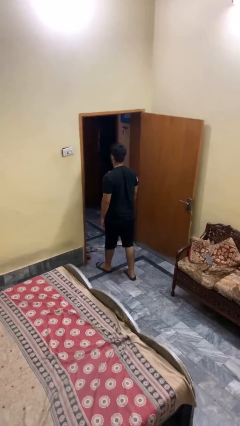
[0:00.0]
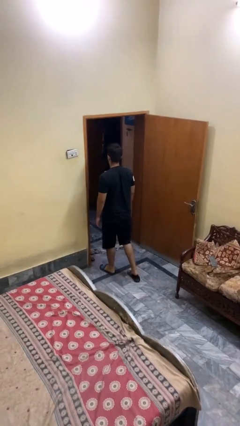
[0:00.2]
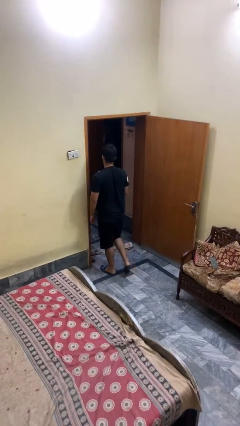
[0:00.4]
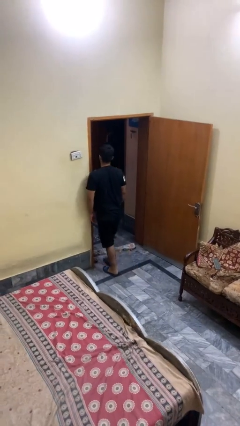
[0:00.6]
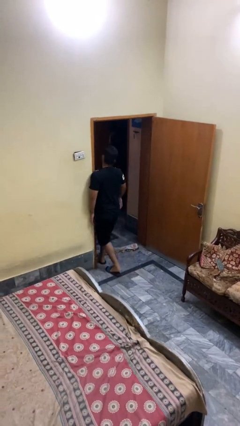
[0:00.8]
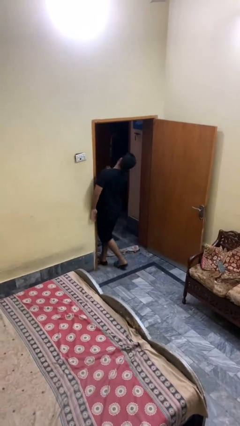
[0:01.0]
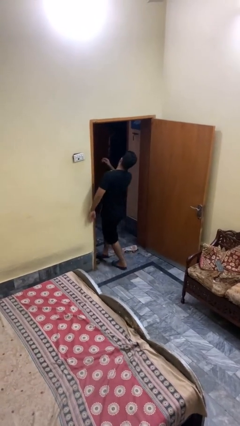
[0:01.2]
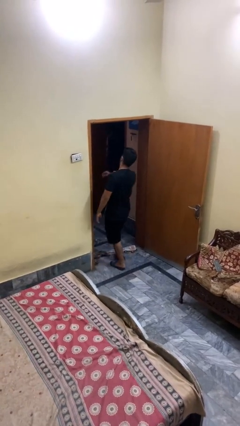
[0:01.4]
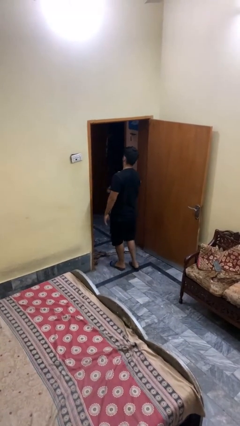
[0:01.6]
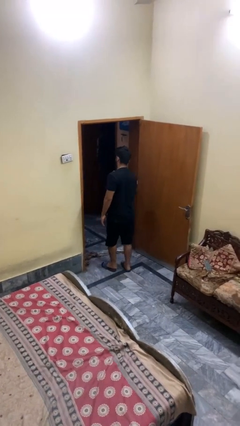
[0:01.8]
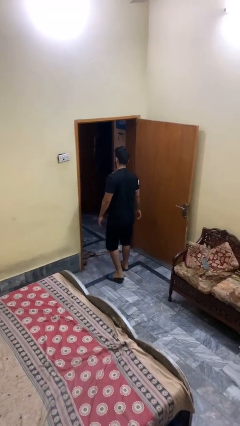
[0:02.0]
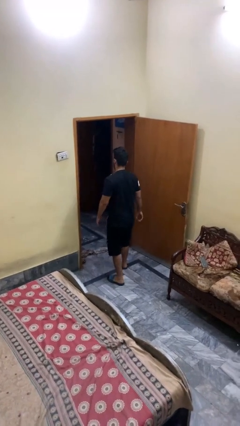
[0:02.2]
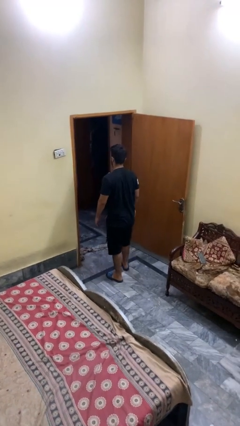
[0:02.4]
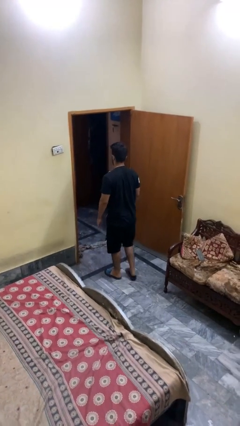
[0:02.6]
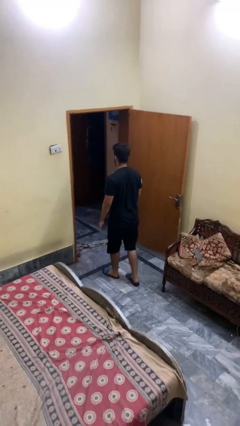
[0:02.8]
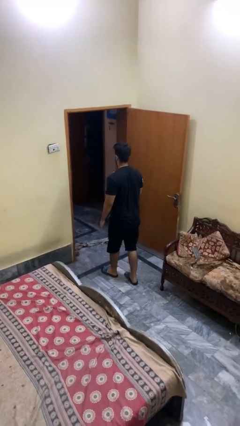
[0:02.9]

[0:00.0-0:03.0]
person bumps into wall

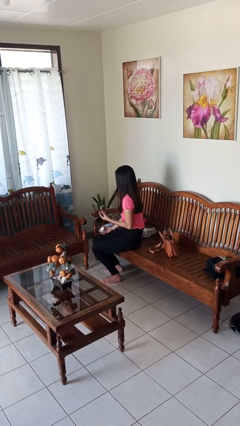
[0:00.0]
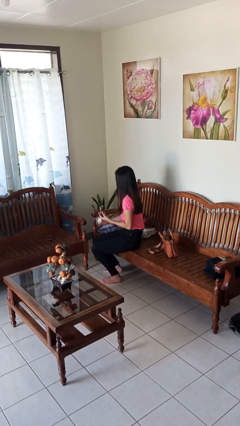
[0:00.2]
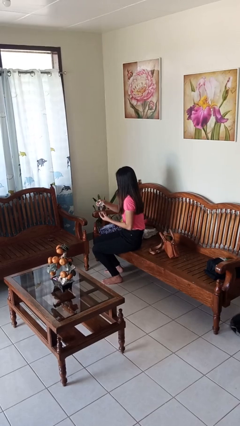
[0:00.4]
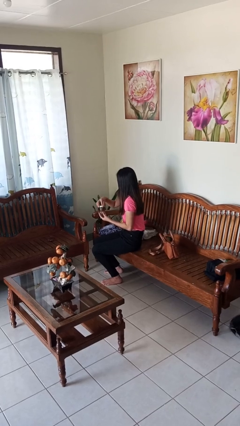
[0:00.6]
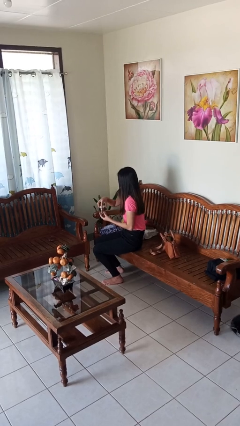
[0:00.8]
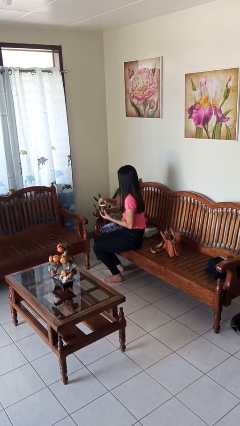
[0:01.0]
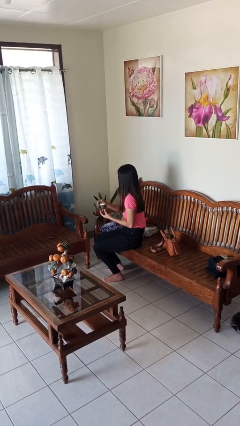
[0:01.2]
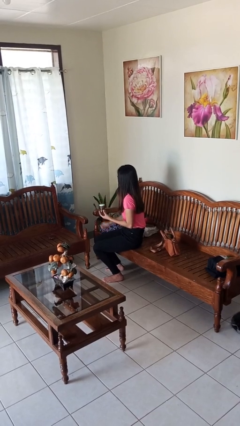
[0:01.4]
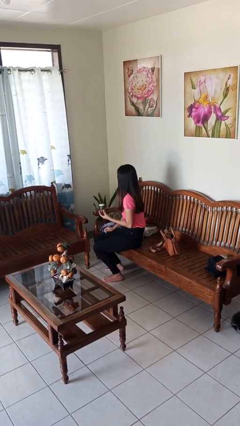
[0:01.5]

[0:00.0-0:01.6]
person closes jar

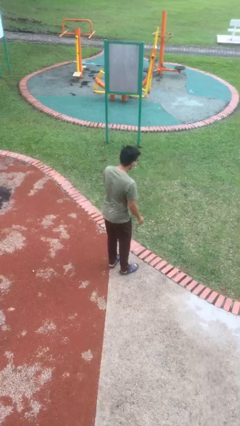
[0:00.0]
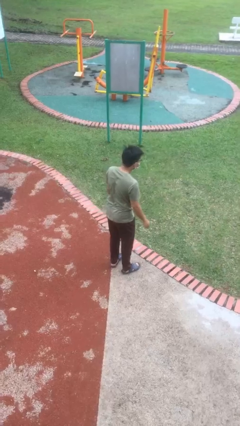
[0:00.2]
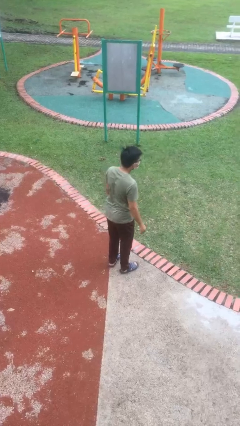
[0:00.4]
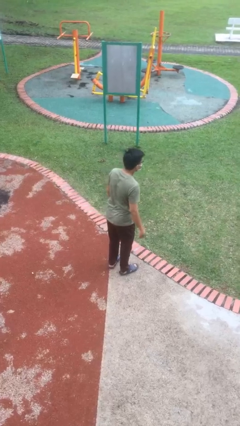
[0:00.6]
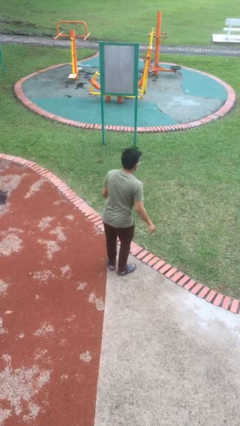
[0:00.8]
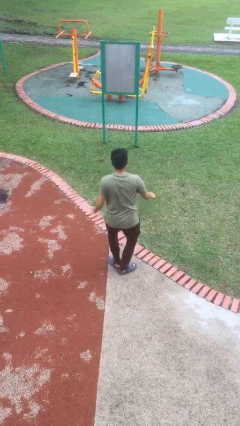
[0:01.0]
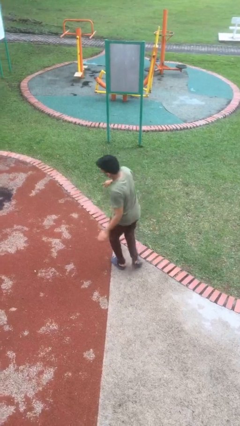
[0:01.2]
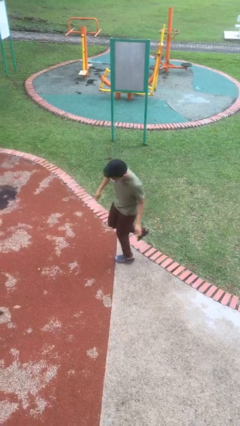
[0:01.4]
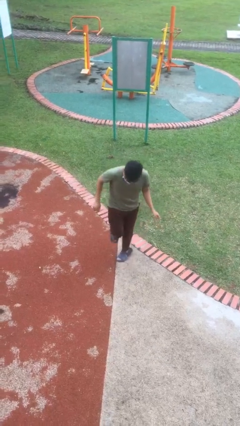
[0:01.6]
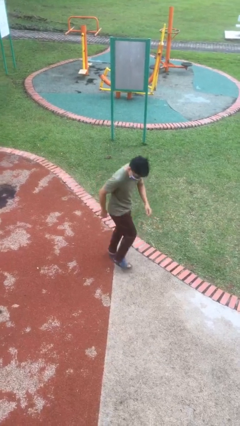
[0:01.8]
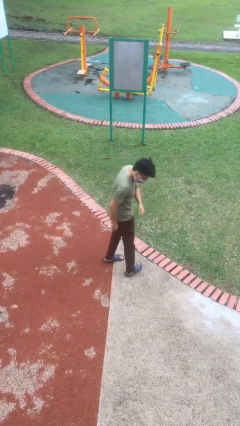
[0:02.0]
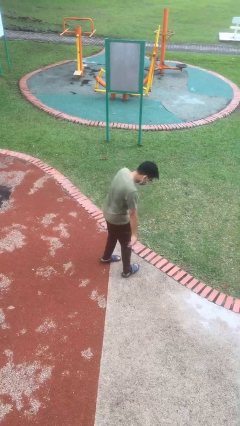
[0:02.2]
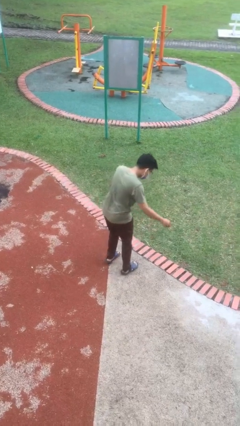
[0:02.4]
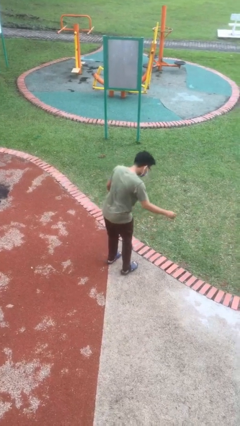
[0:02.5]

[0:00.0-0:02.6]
person twirls

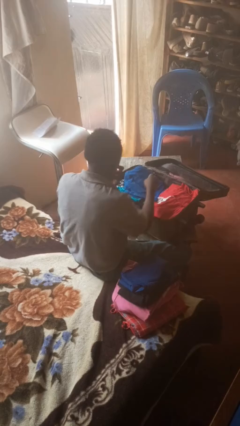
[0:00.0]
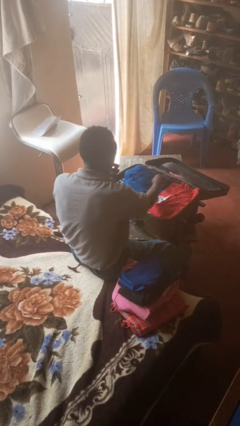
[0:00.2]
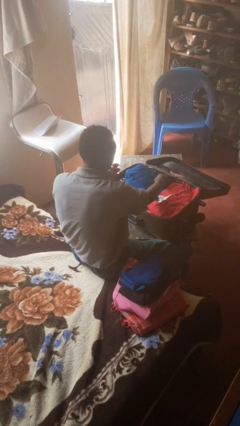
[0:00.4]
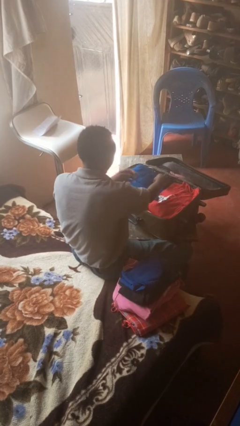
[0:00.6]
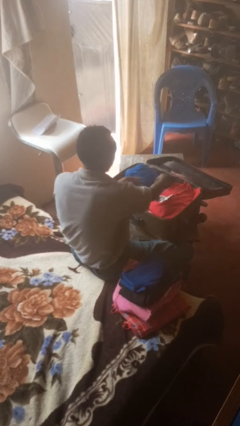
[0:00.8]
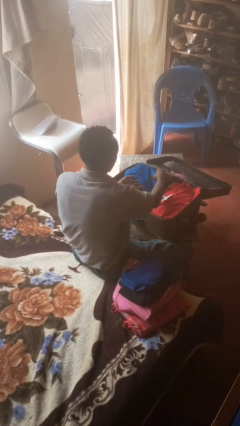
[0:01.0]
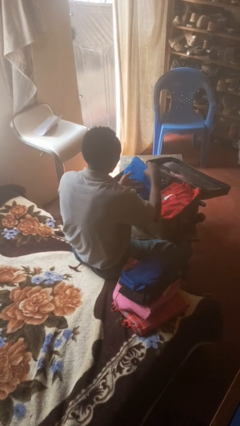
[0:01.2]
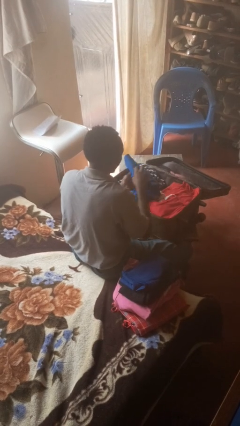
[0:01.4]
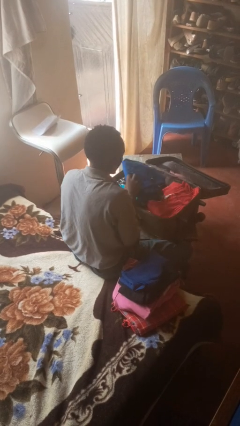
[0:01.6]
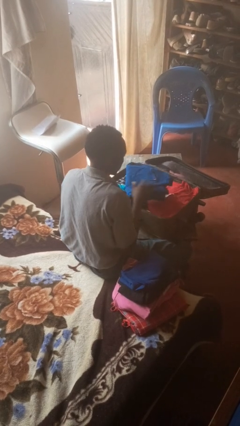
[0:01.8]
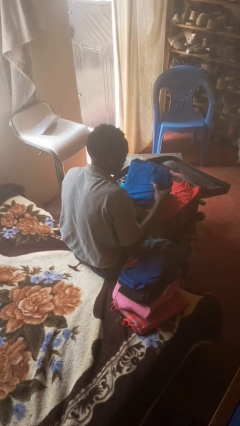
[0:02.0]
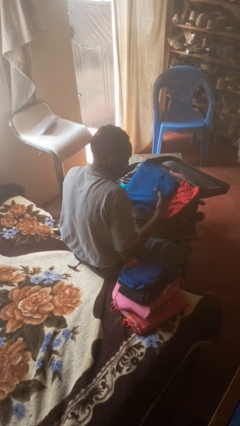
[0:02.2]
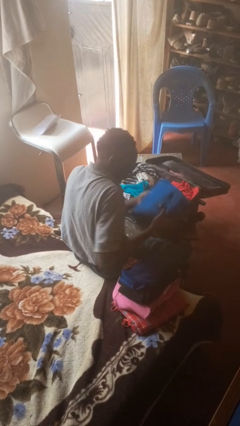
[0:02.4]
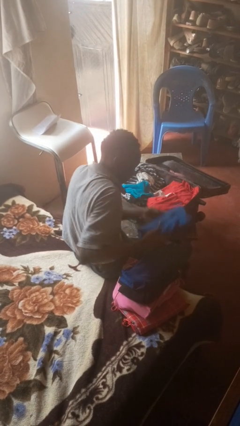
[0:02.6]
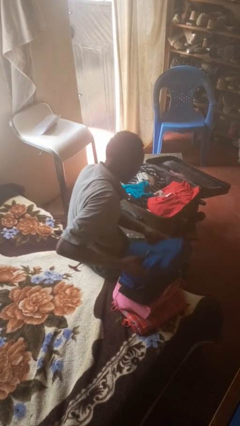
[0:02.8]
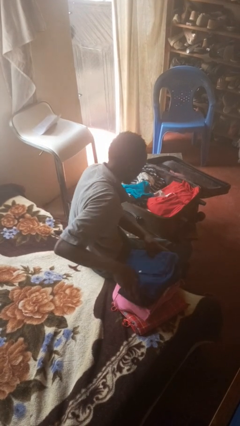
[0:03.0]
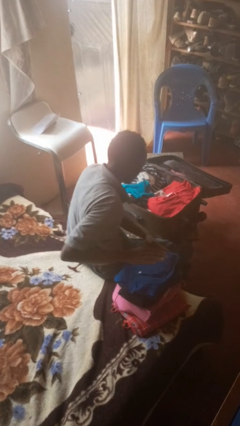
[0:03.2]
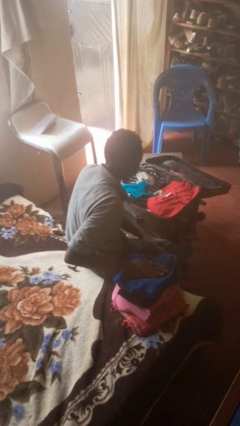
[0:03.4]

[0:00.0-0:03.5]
person unloads clothes from suitcase

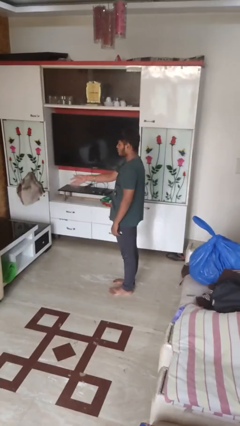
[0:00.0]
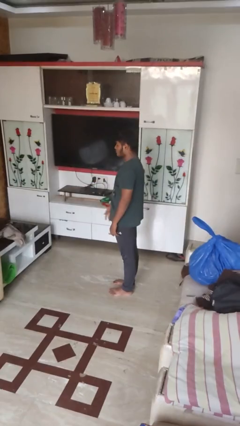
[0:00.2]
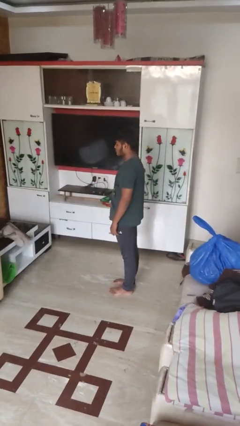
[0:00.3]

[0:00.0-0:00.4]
person throws object on table

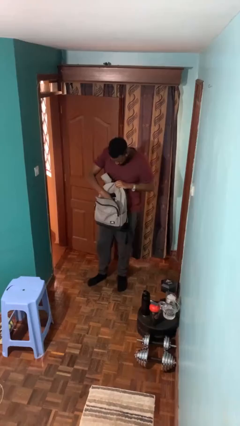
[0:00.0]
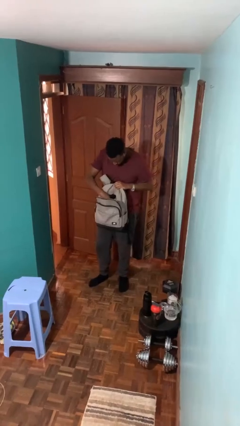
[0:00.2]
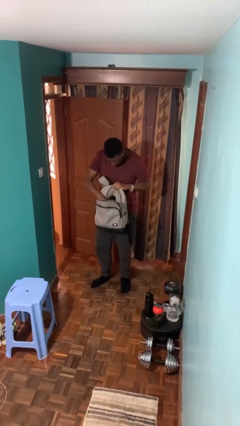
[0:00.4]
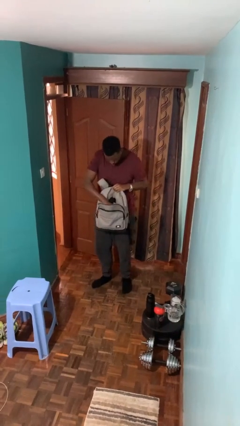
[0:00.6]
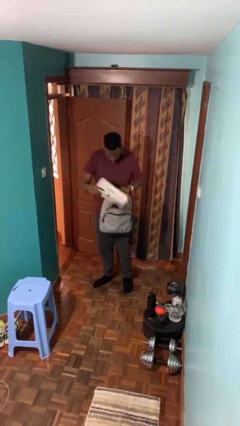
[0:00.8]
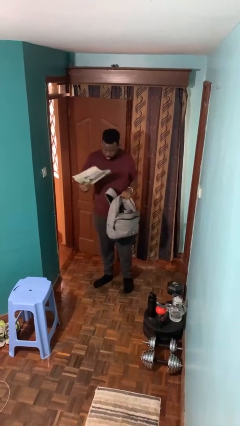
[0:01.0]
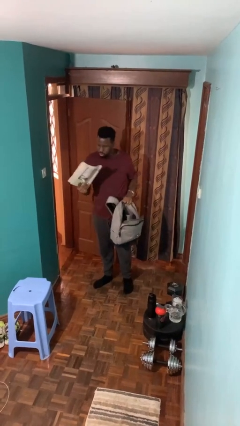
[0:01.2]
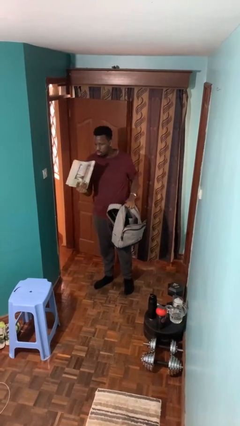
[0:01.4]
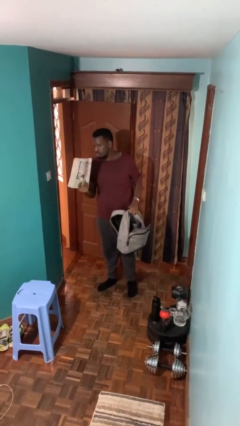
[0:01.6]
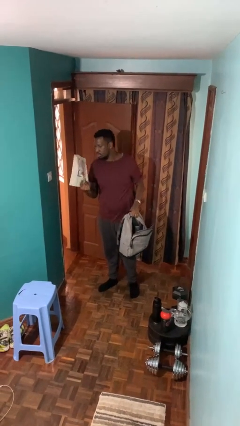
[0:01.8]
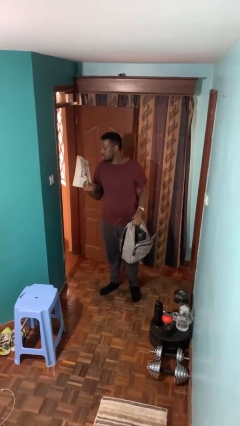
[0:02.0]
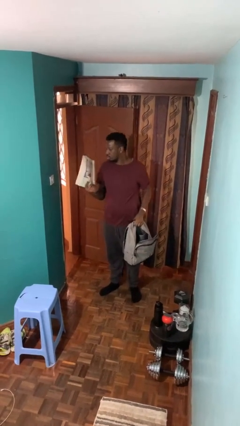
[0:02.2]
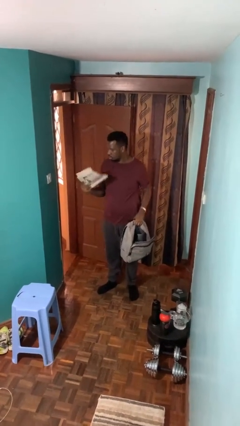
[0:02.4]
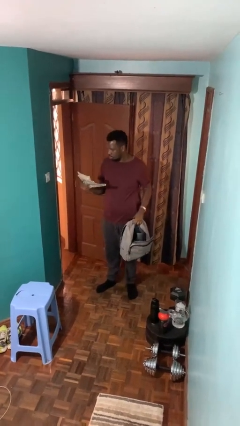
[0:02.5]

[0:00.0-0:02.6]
person takes object from backpack

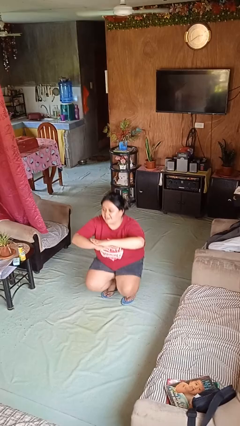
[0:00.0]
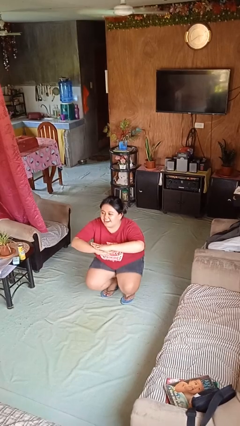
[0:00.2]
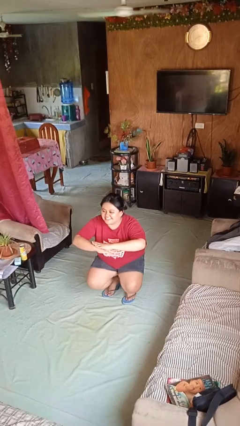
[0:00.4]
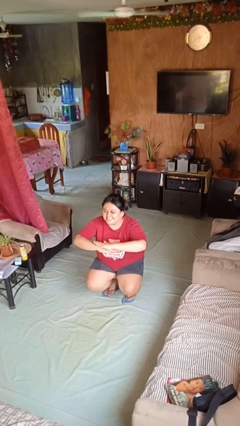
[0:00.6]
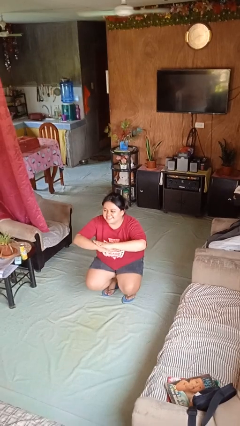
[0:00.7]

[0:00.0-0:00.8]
person squats

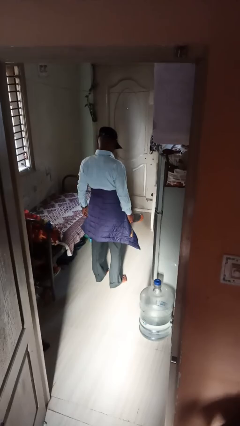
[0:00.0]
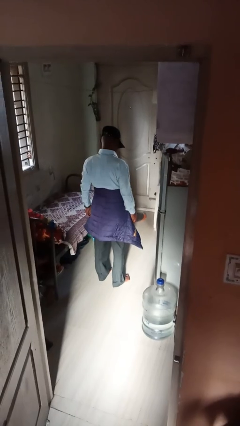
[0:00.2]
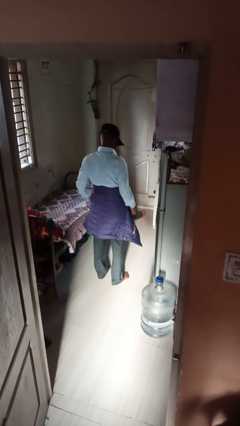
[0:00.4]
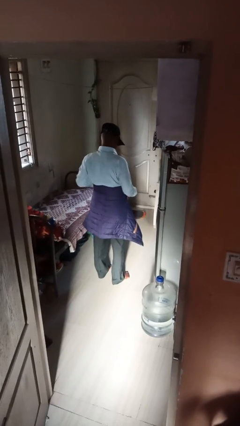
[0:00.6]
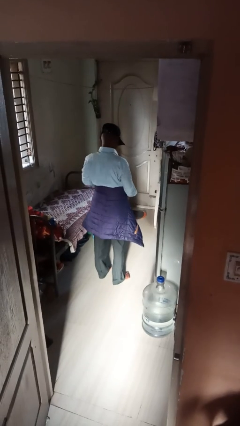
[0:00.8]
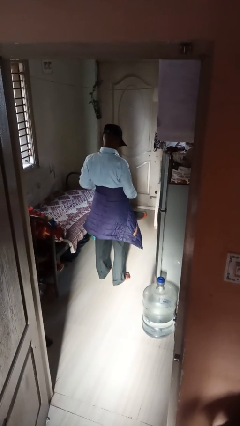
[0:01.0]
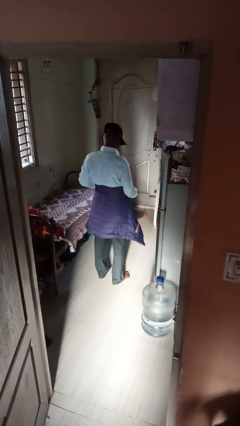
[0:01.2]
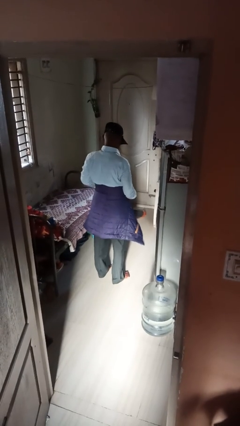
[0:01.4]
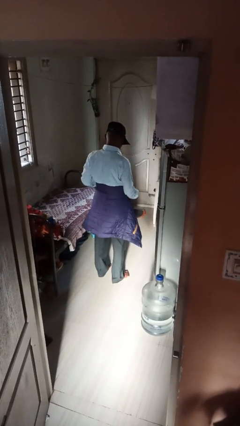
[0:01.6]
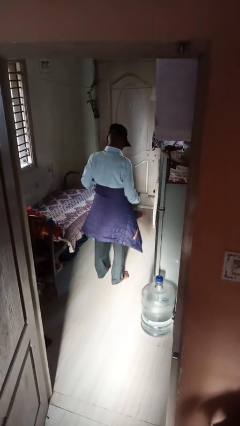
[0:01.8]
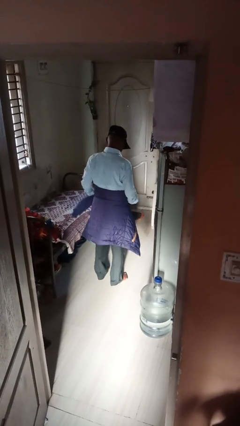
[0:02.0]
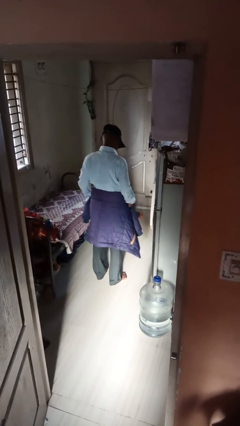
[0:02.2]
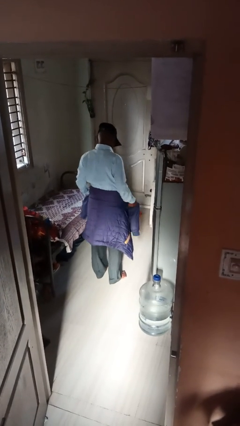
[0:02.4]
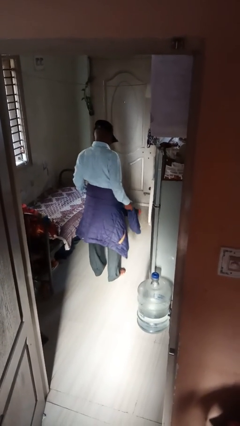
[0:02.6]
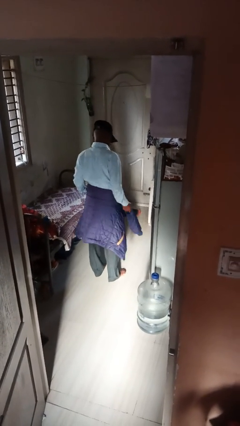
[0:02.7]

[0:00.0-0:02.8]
person unties jacket around waist
